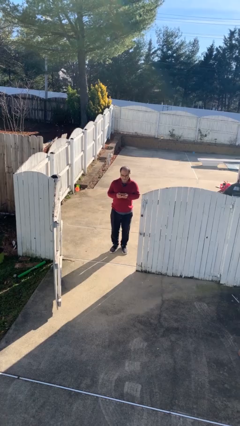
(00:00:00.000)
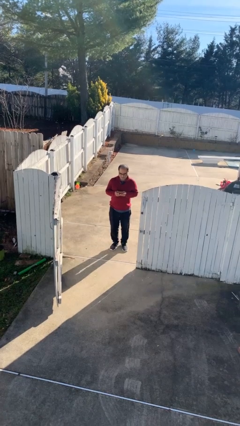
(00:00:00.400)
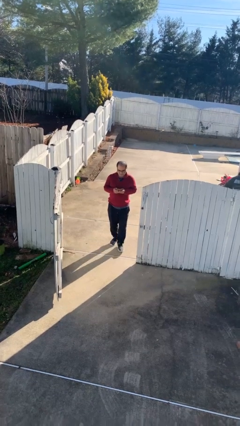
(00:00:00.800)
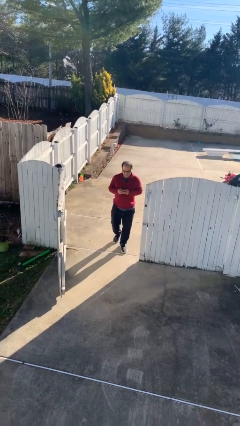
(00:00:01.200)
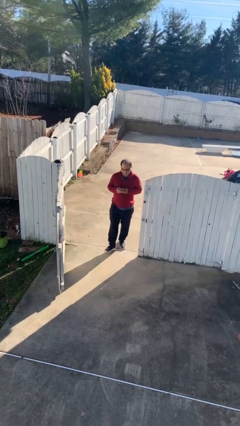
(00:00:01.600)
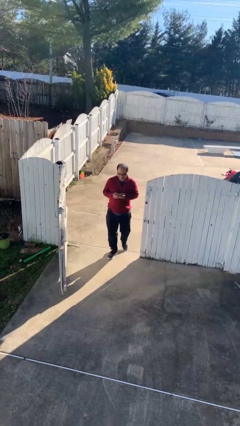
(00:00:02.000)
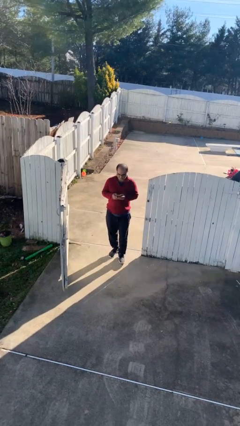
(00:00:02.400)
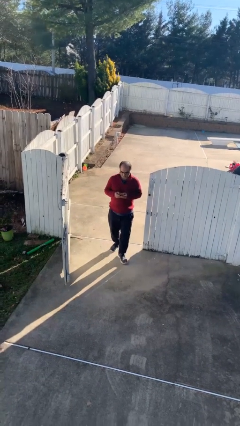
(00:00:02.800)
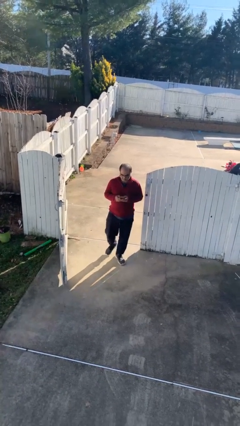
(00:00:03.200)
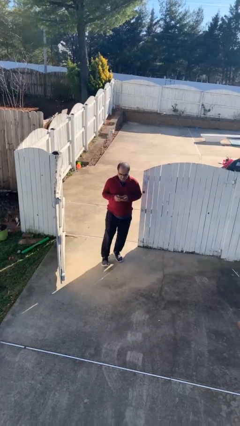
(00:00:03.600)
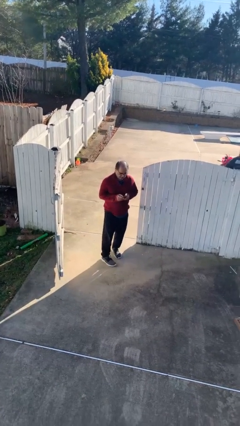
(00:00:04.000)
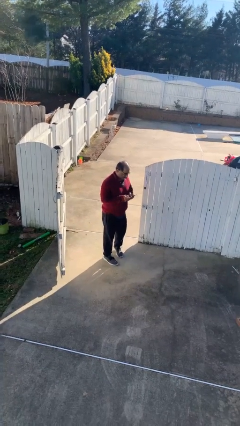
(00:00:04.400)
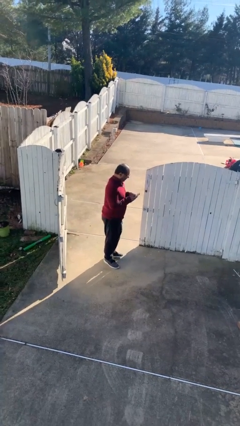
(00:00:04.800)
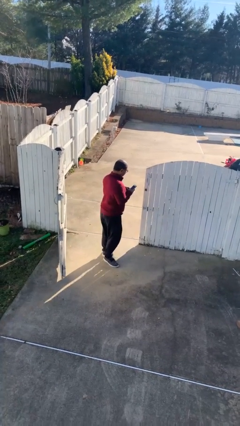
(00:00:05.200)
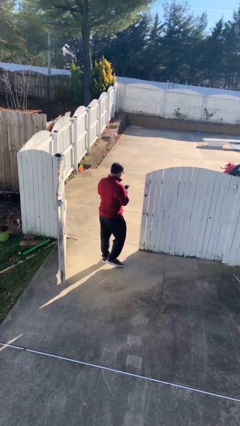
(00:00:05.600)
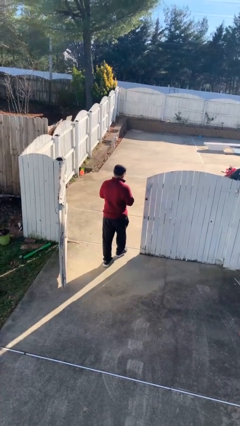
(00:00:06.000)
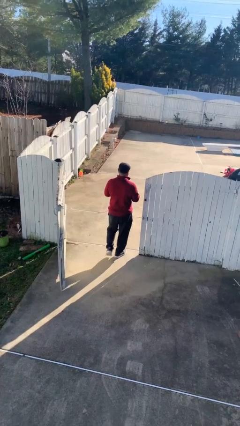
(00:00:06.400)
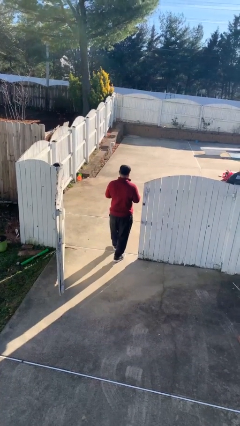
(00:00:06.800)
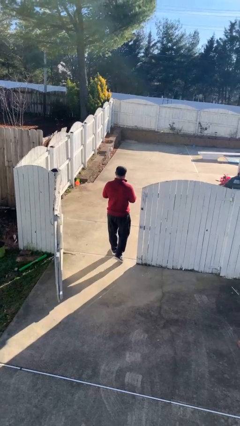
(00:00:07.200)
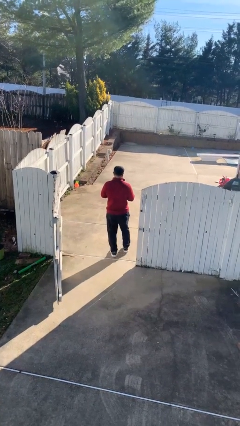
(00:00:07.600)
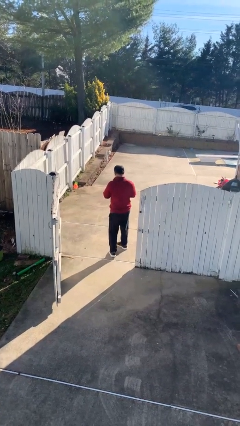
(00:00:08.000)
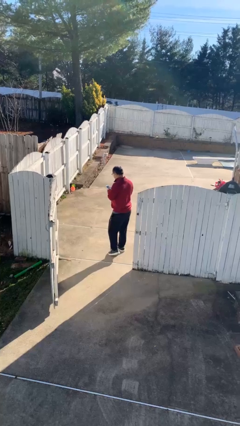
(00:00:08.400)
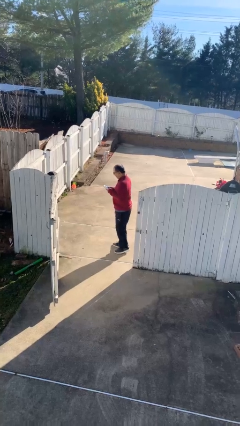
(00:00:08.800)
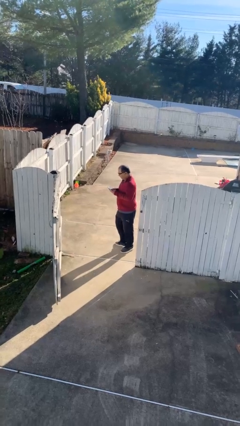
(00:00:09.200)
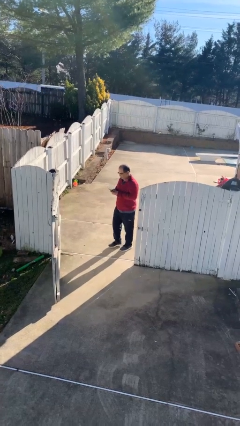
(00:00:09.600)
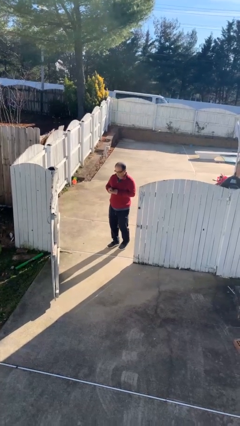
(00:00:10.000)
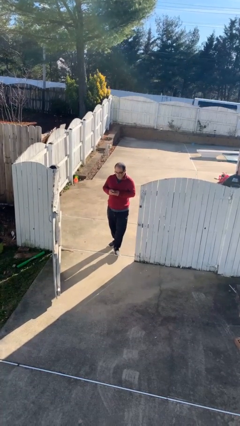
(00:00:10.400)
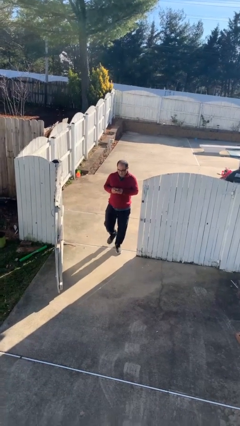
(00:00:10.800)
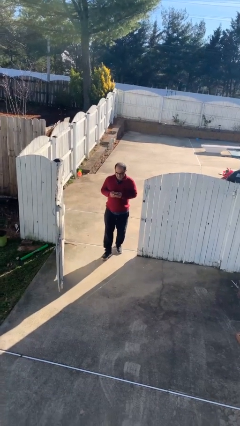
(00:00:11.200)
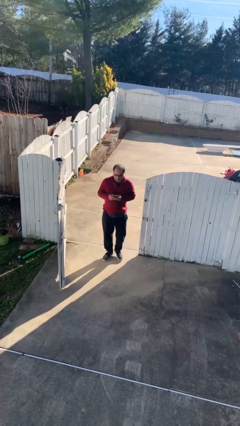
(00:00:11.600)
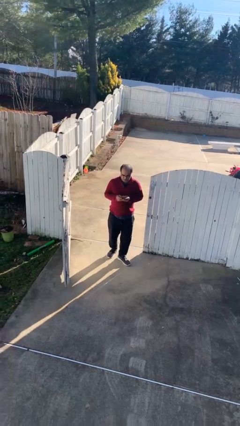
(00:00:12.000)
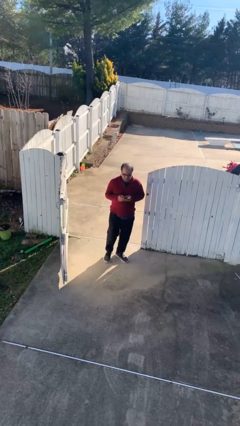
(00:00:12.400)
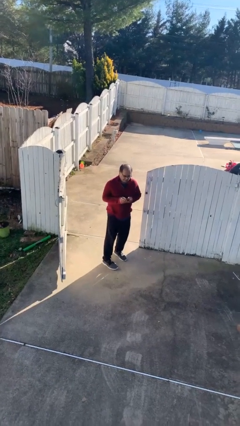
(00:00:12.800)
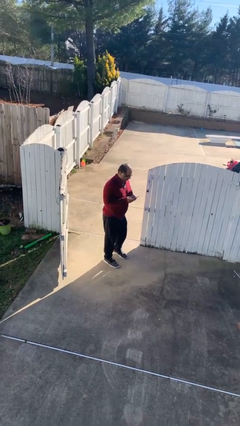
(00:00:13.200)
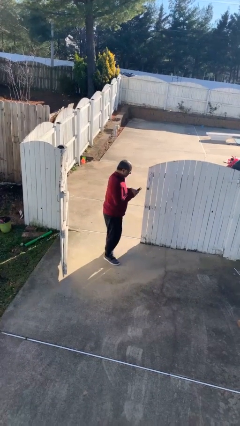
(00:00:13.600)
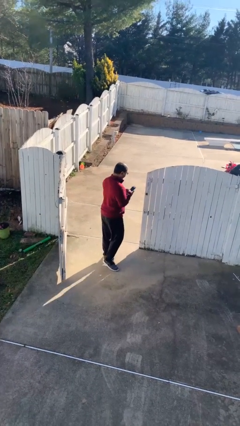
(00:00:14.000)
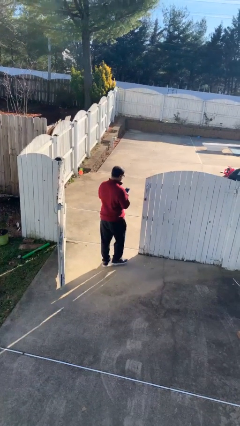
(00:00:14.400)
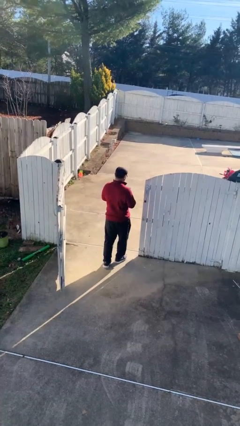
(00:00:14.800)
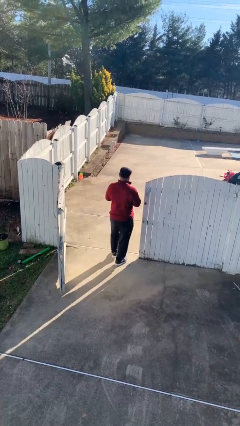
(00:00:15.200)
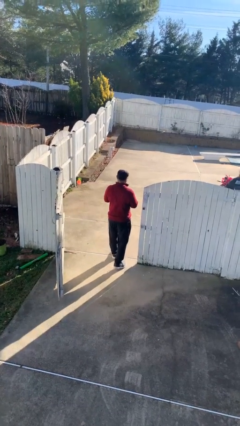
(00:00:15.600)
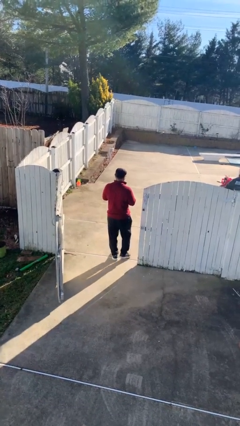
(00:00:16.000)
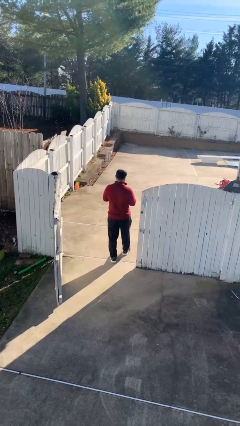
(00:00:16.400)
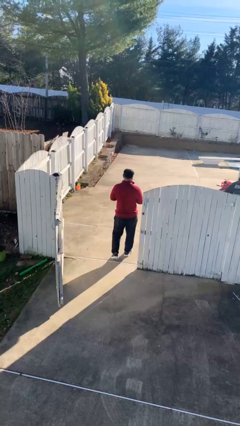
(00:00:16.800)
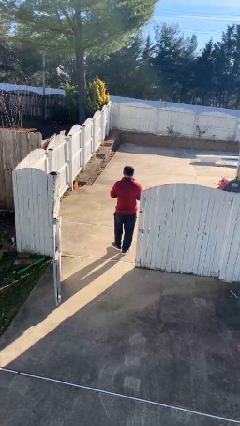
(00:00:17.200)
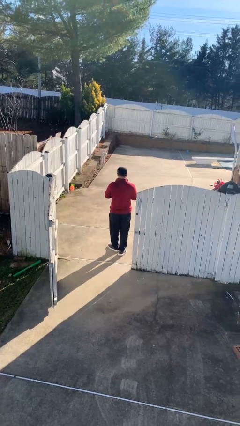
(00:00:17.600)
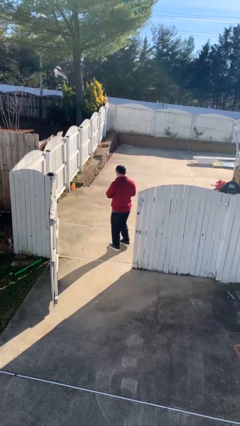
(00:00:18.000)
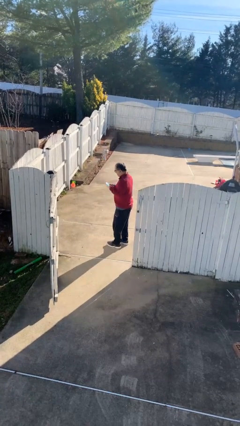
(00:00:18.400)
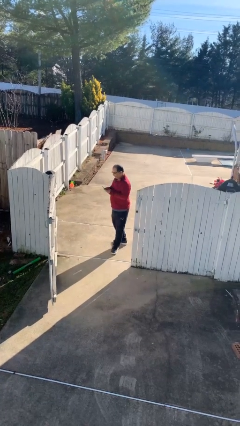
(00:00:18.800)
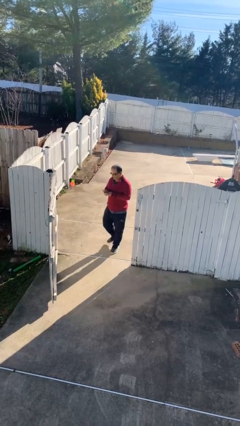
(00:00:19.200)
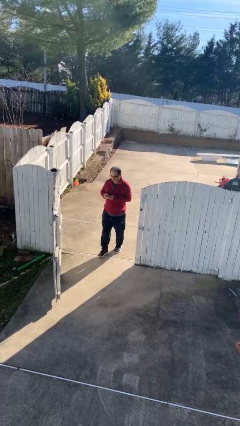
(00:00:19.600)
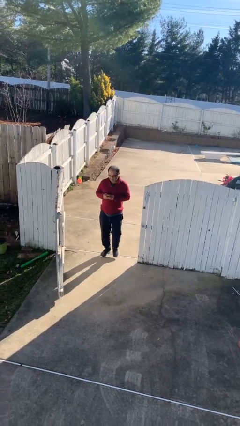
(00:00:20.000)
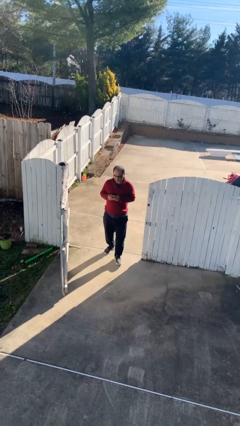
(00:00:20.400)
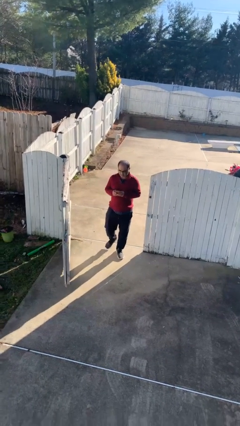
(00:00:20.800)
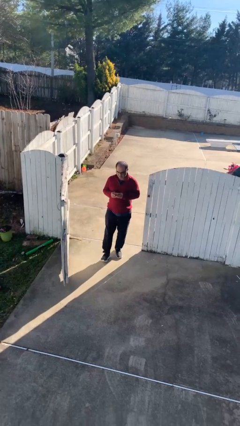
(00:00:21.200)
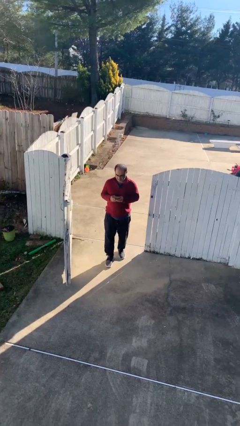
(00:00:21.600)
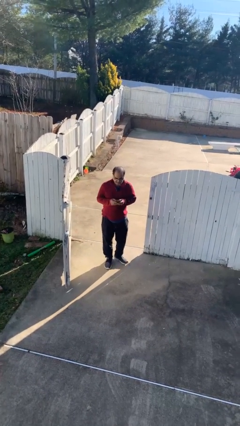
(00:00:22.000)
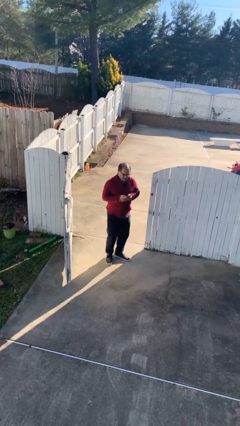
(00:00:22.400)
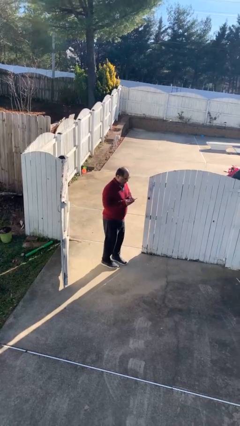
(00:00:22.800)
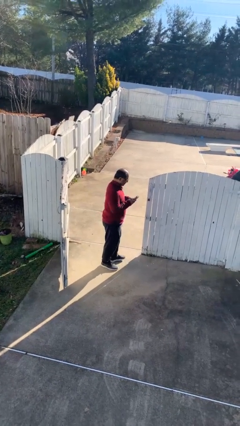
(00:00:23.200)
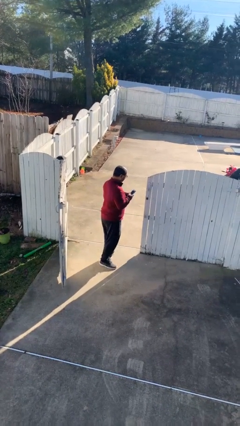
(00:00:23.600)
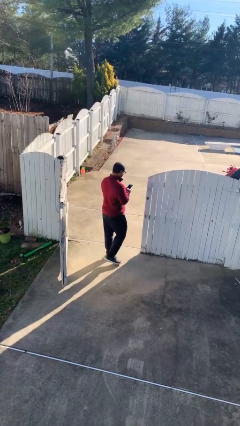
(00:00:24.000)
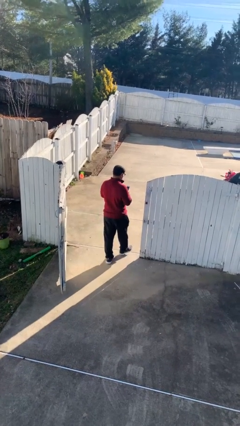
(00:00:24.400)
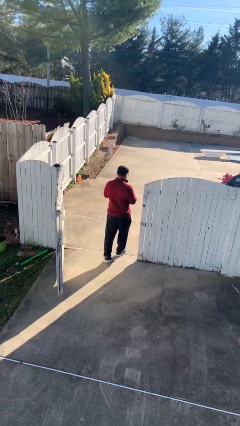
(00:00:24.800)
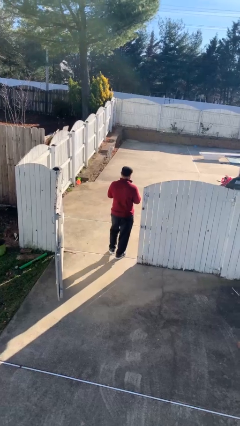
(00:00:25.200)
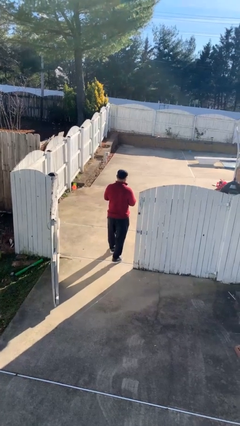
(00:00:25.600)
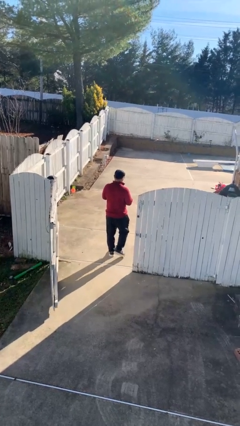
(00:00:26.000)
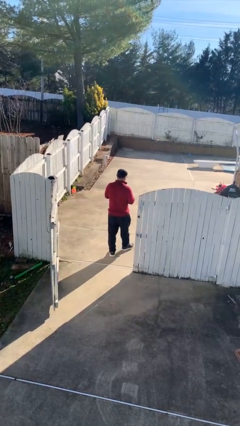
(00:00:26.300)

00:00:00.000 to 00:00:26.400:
person texts on phone

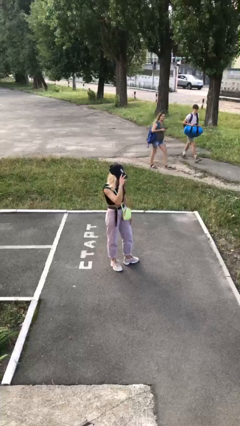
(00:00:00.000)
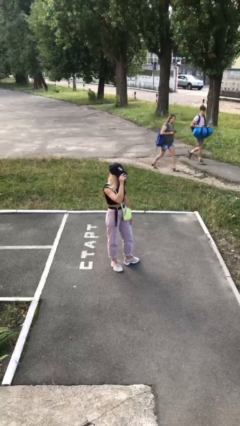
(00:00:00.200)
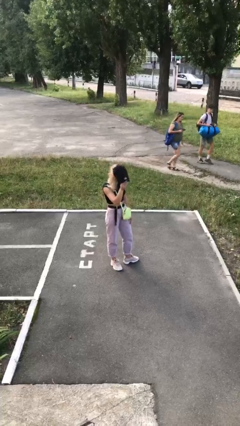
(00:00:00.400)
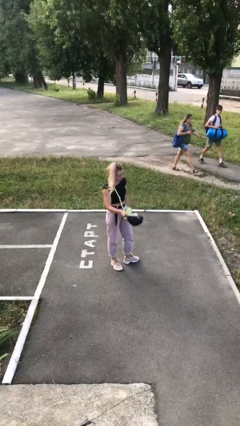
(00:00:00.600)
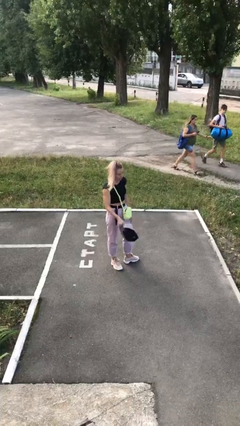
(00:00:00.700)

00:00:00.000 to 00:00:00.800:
person takes off hat

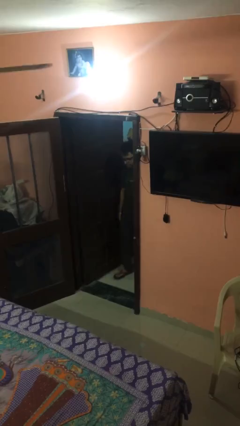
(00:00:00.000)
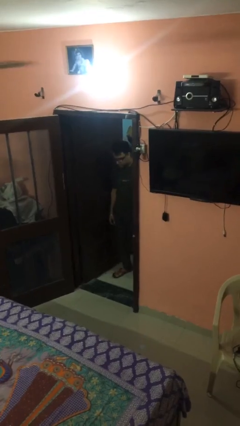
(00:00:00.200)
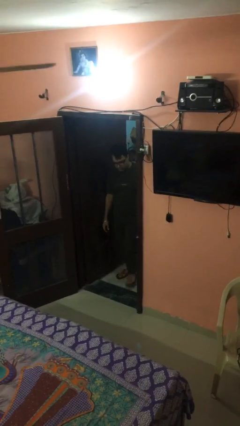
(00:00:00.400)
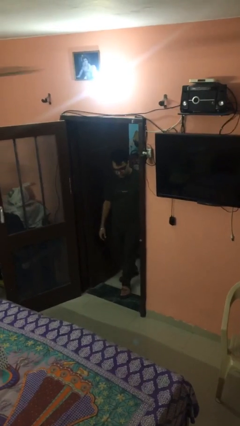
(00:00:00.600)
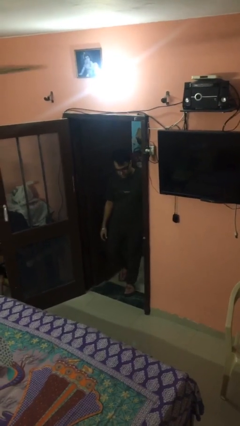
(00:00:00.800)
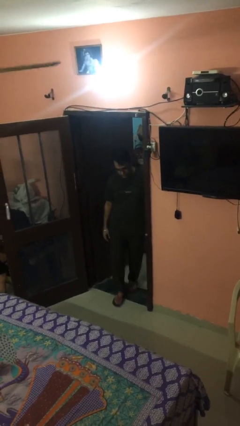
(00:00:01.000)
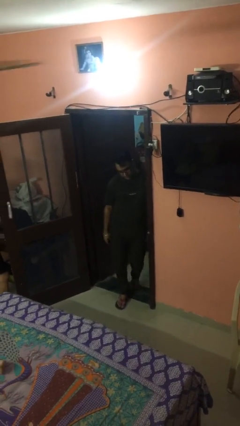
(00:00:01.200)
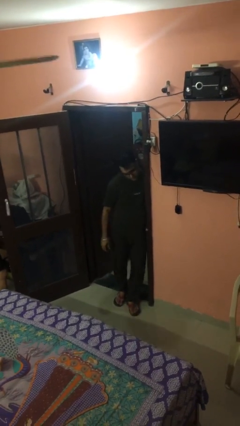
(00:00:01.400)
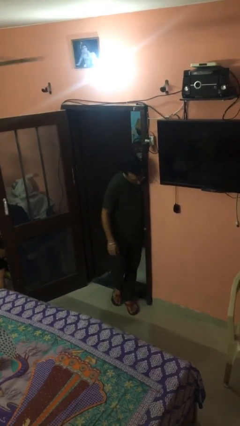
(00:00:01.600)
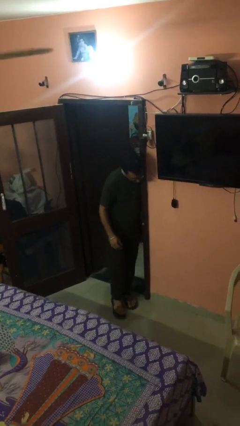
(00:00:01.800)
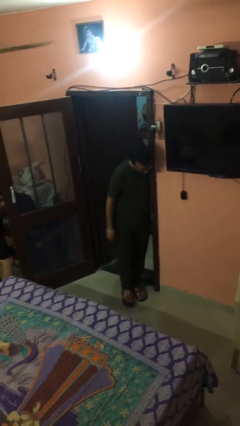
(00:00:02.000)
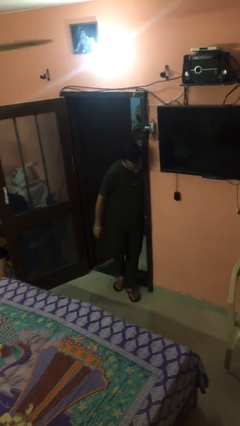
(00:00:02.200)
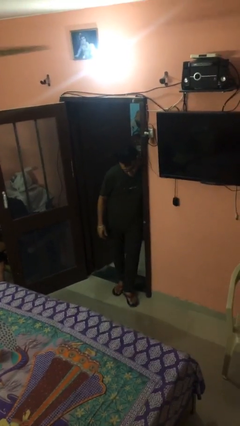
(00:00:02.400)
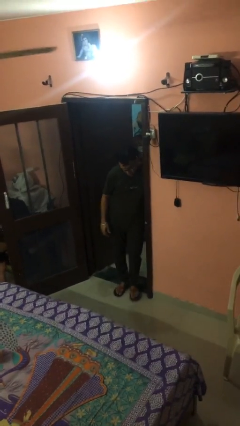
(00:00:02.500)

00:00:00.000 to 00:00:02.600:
person bumps into wall

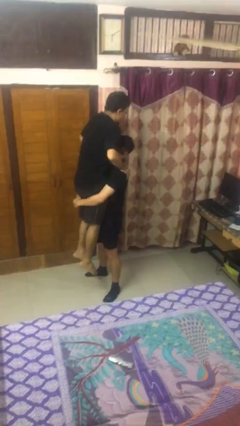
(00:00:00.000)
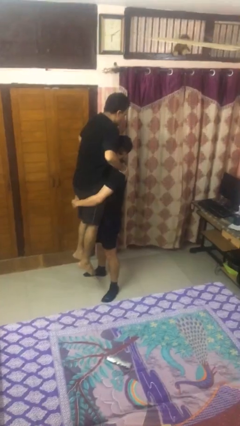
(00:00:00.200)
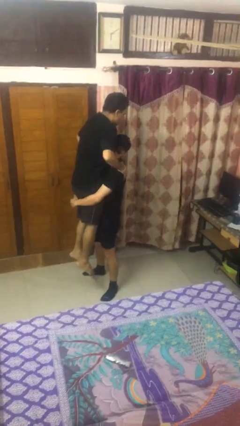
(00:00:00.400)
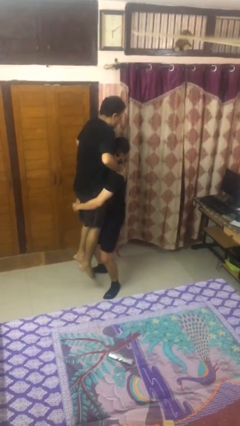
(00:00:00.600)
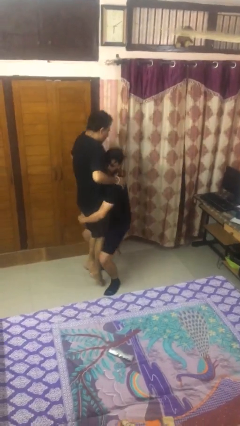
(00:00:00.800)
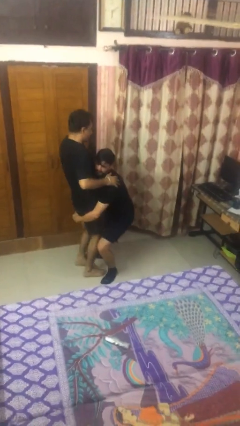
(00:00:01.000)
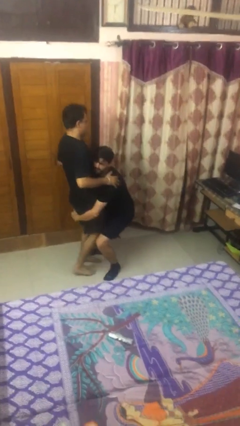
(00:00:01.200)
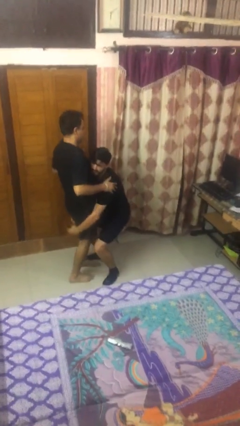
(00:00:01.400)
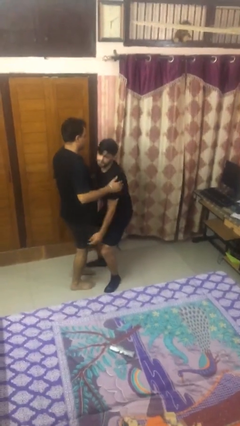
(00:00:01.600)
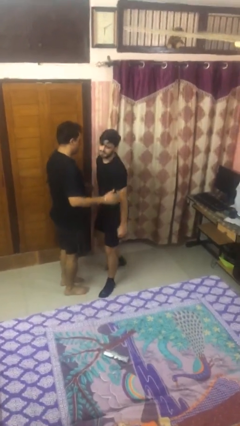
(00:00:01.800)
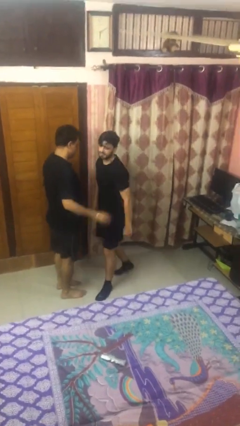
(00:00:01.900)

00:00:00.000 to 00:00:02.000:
person puts down person
